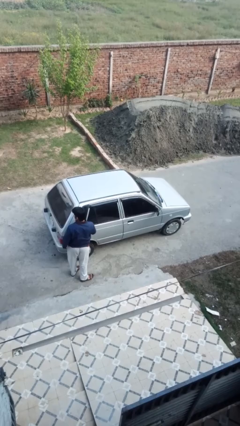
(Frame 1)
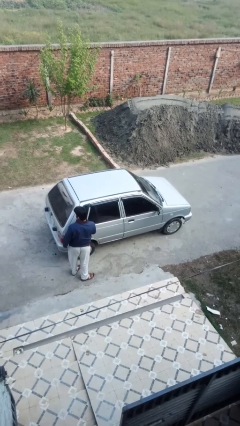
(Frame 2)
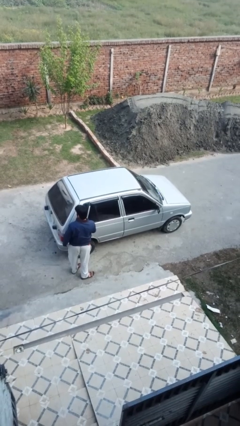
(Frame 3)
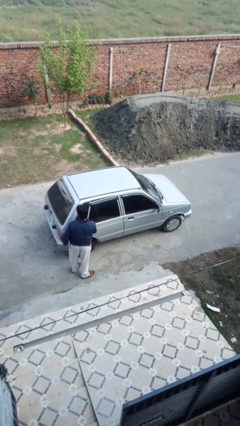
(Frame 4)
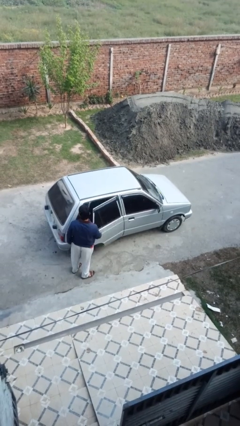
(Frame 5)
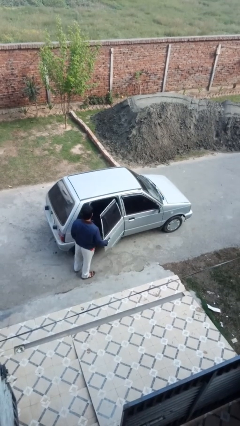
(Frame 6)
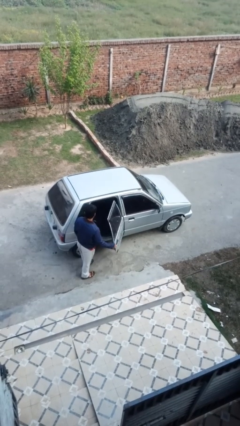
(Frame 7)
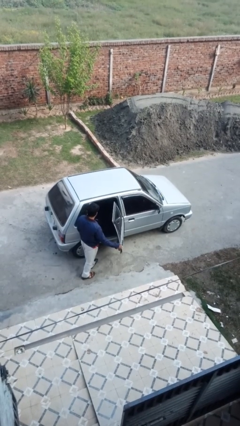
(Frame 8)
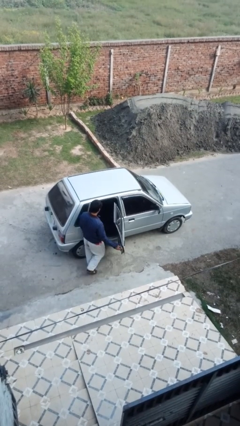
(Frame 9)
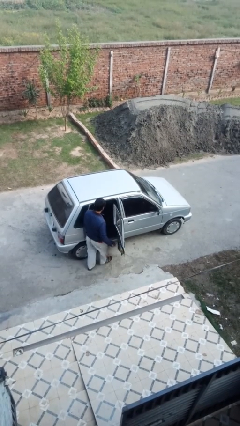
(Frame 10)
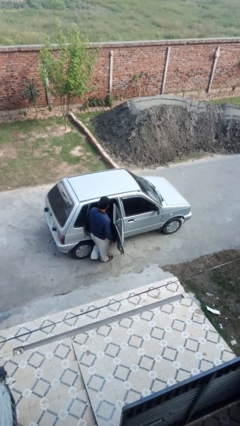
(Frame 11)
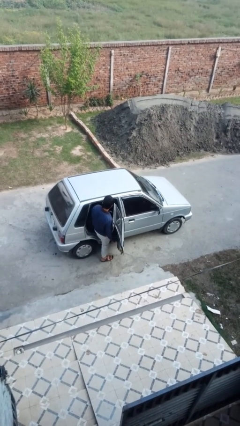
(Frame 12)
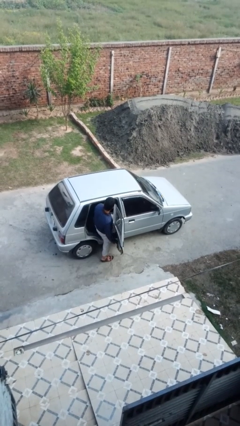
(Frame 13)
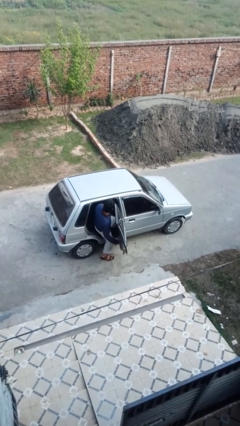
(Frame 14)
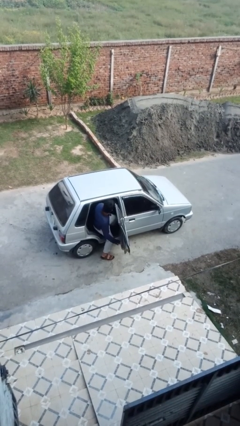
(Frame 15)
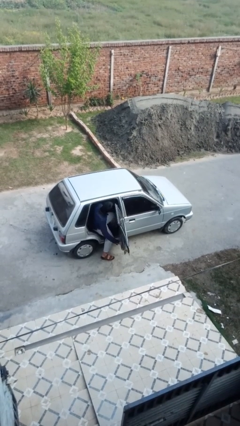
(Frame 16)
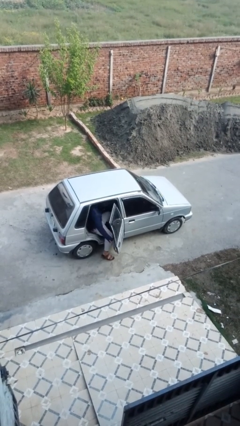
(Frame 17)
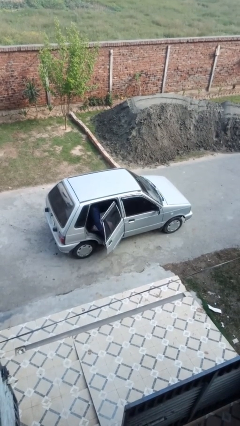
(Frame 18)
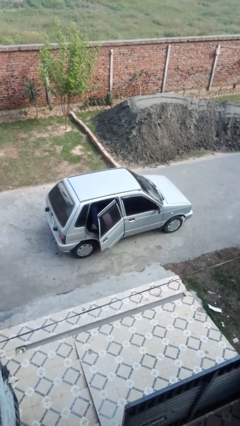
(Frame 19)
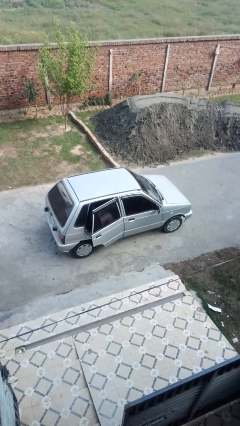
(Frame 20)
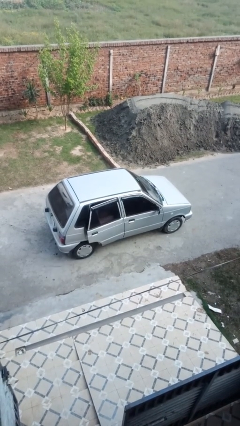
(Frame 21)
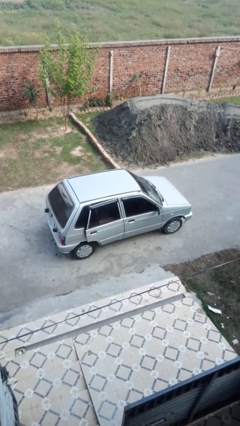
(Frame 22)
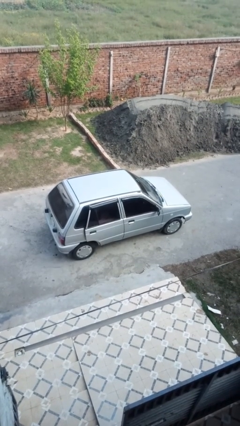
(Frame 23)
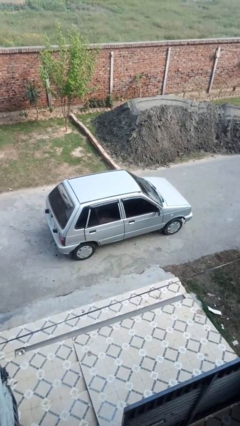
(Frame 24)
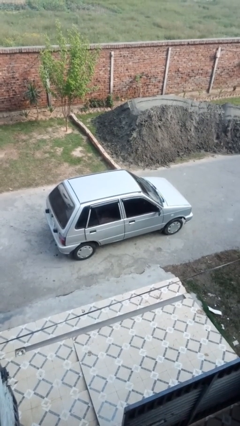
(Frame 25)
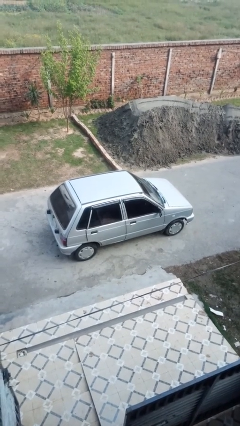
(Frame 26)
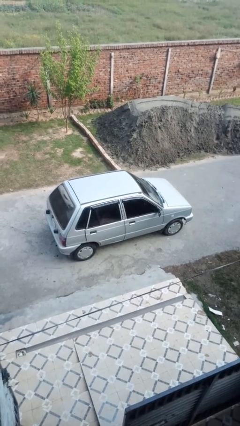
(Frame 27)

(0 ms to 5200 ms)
car picks up person

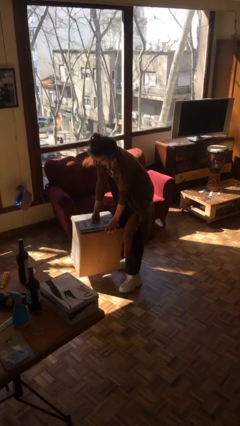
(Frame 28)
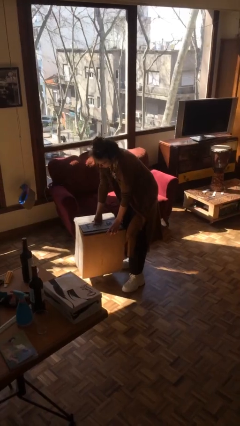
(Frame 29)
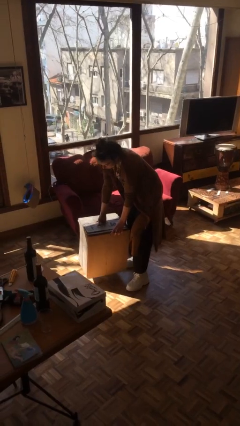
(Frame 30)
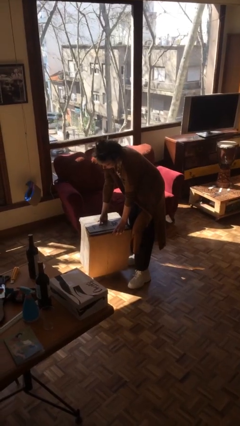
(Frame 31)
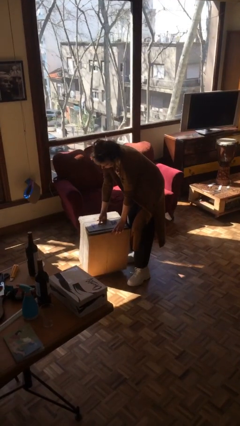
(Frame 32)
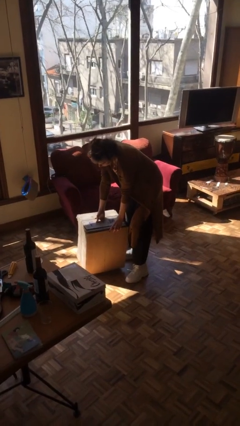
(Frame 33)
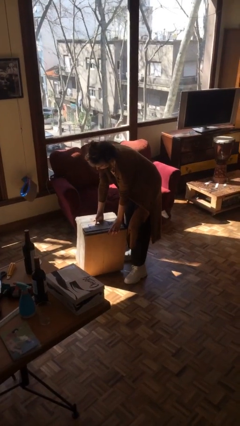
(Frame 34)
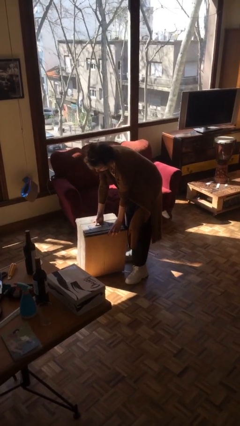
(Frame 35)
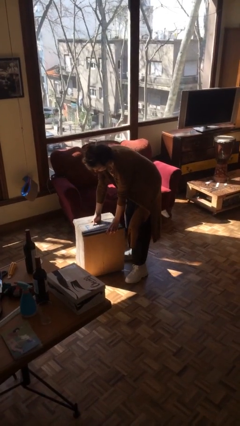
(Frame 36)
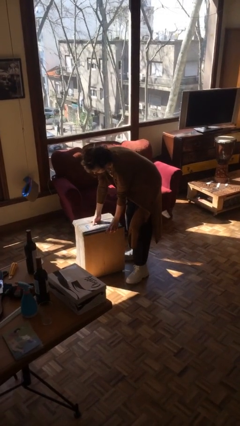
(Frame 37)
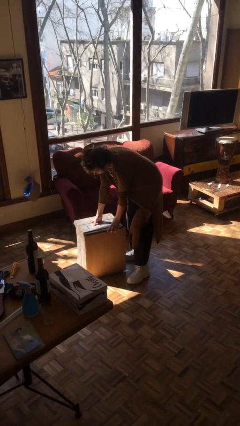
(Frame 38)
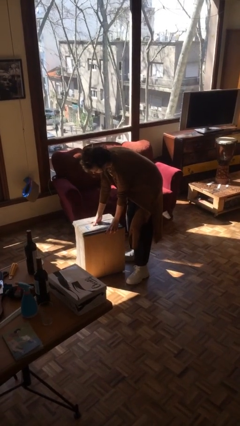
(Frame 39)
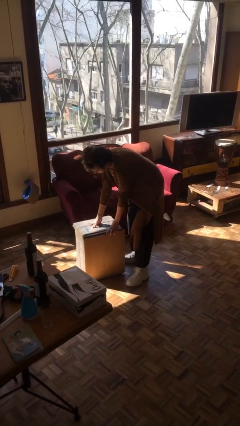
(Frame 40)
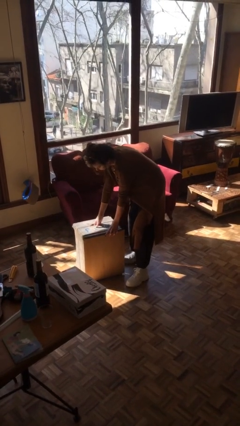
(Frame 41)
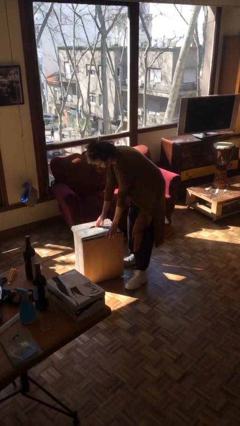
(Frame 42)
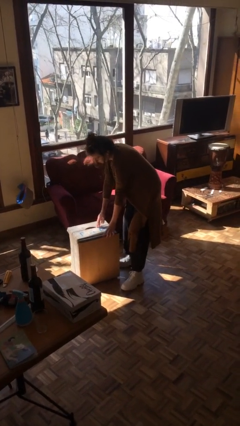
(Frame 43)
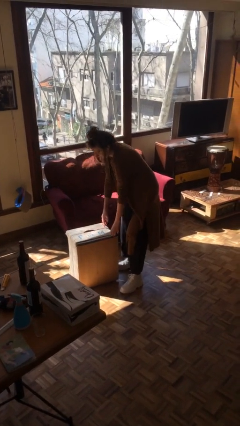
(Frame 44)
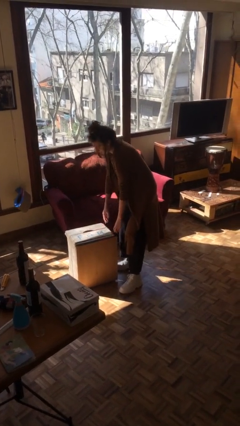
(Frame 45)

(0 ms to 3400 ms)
person puts down object on floor

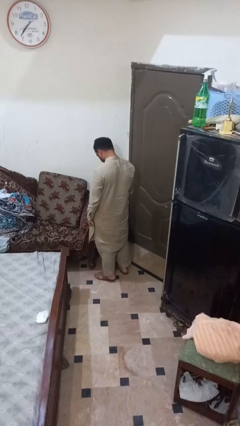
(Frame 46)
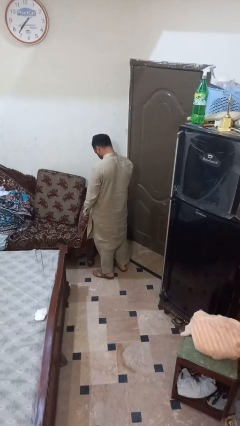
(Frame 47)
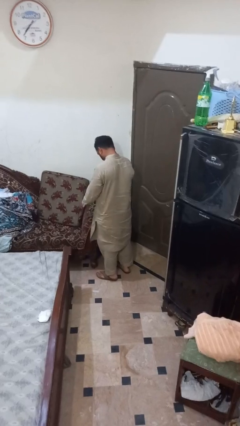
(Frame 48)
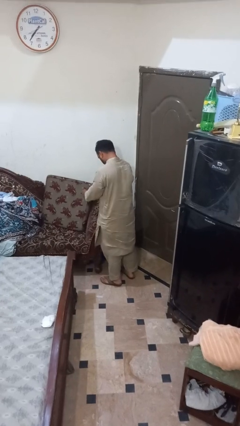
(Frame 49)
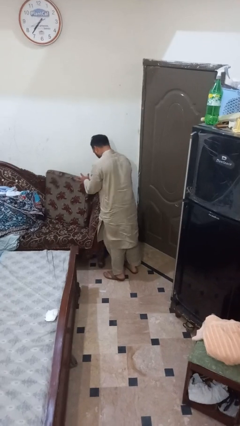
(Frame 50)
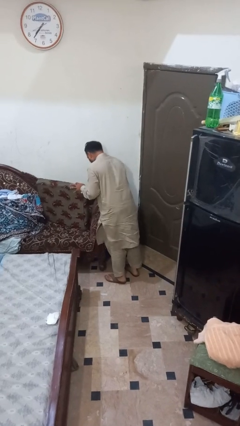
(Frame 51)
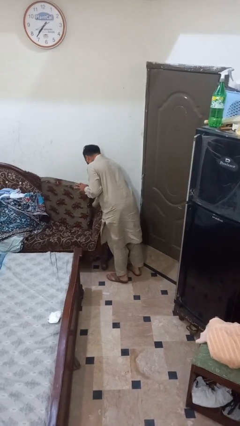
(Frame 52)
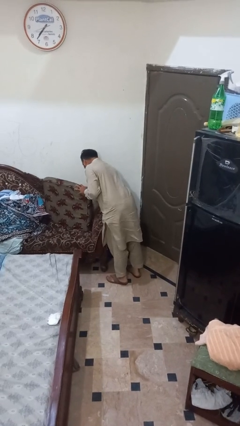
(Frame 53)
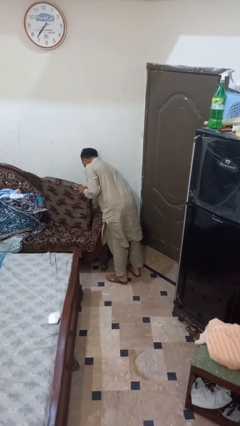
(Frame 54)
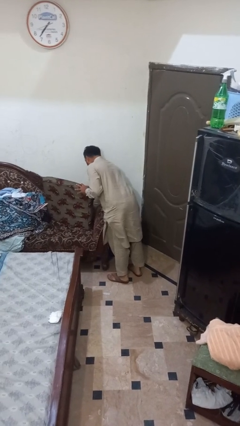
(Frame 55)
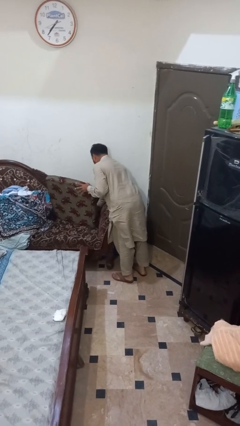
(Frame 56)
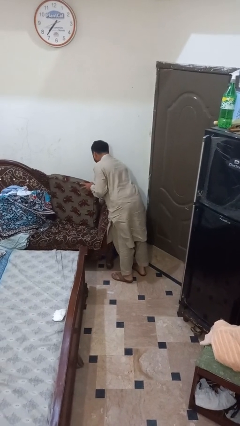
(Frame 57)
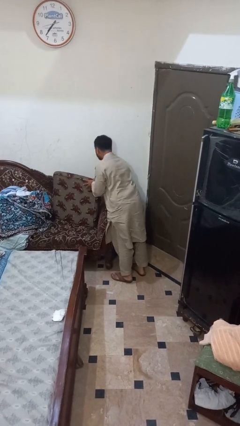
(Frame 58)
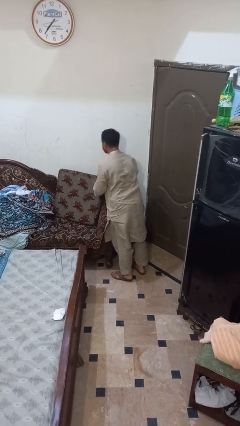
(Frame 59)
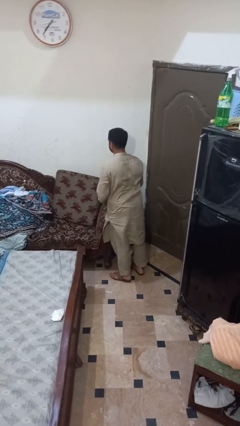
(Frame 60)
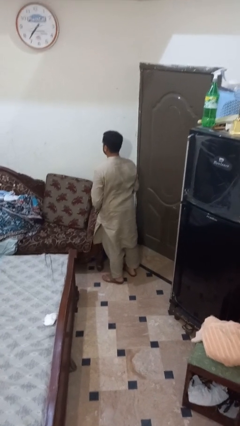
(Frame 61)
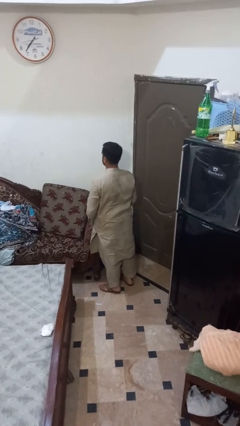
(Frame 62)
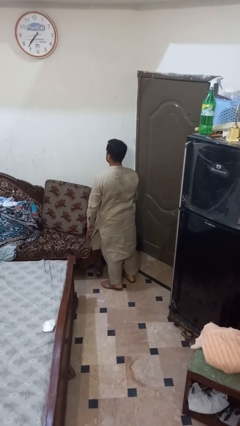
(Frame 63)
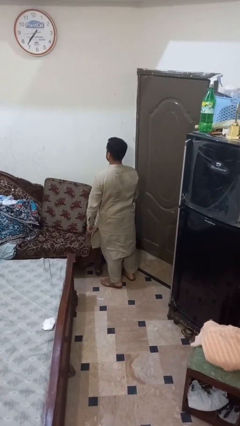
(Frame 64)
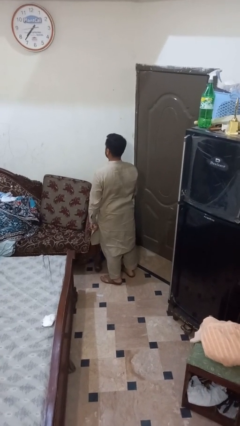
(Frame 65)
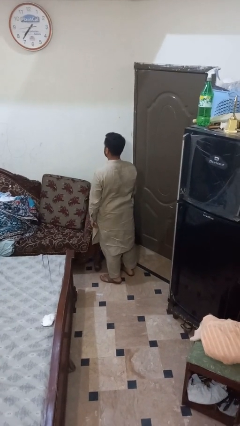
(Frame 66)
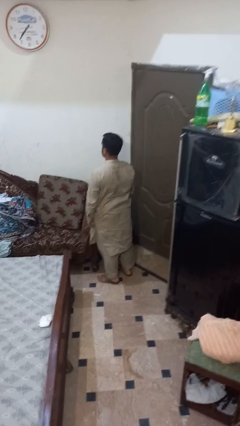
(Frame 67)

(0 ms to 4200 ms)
person searches in couch

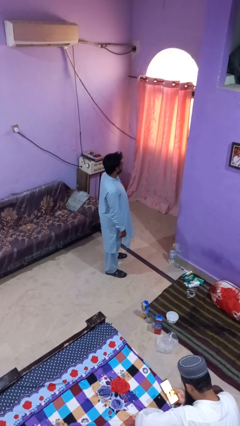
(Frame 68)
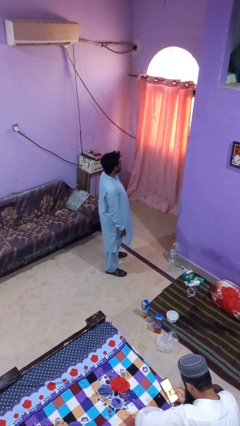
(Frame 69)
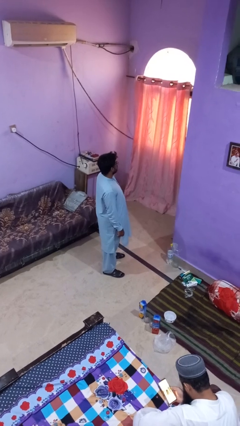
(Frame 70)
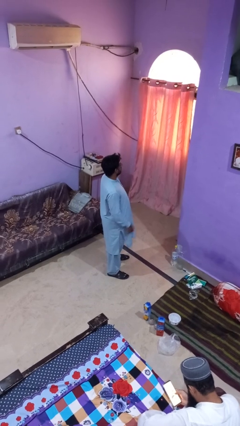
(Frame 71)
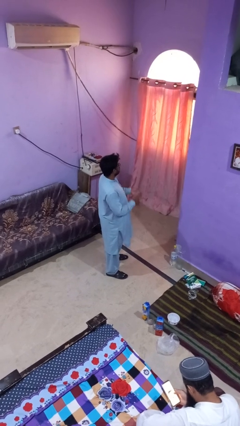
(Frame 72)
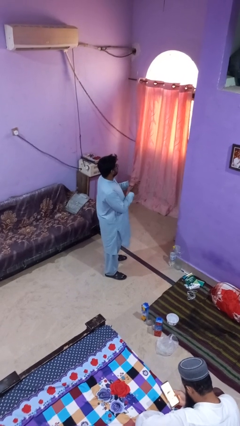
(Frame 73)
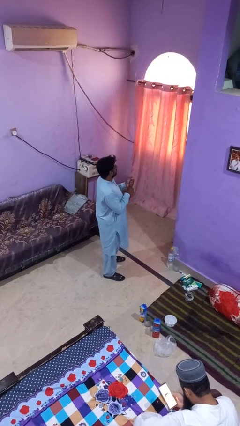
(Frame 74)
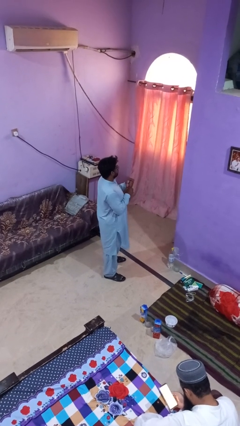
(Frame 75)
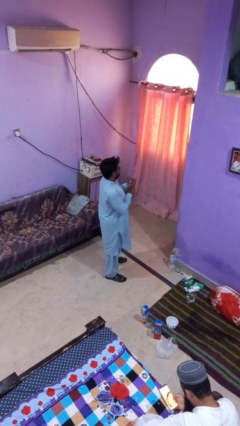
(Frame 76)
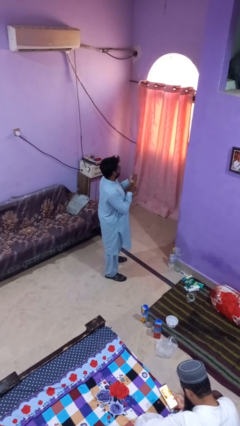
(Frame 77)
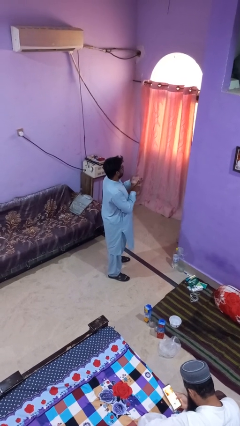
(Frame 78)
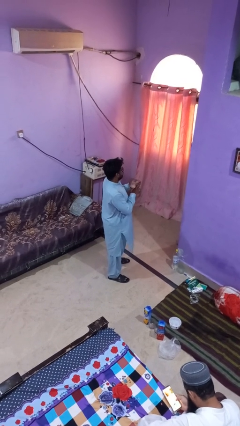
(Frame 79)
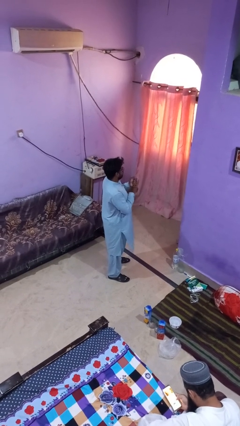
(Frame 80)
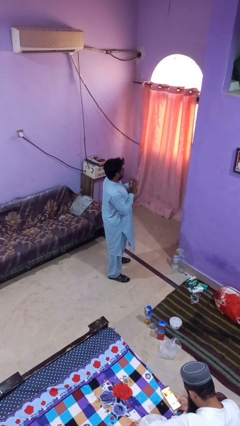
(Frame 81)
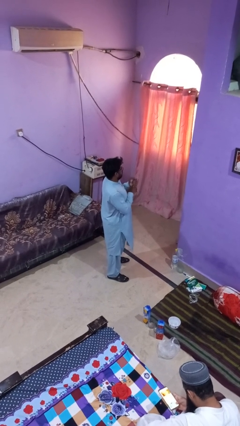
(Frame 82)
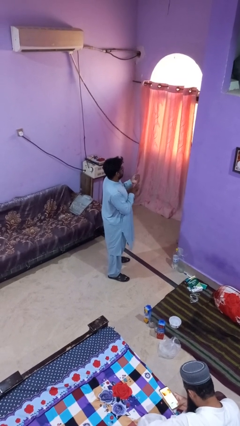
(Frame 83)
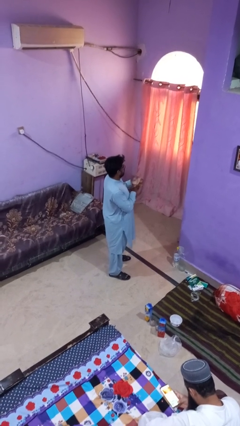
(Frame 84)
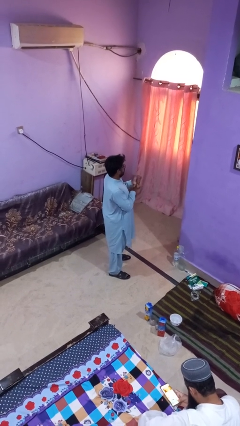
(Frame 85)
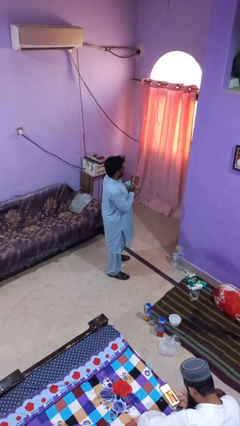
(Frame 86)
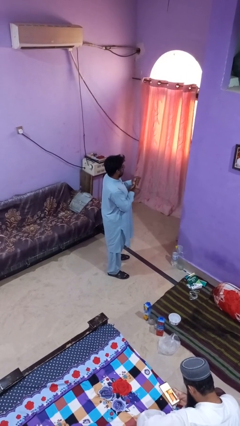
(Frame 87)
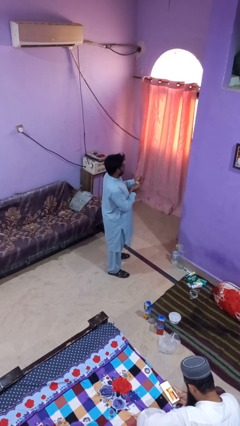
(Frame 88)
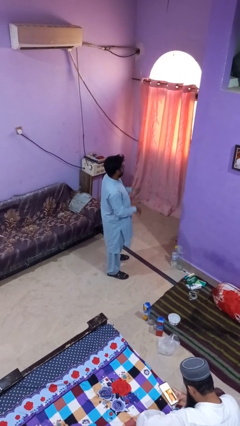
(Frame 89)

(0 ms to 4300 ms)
person cracks knuckles
